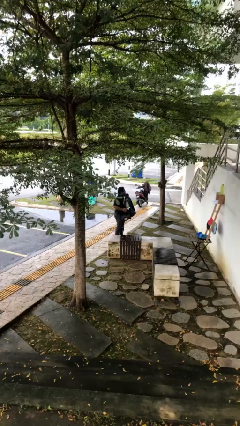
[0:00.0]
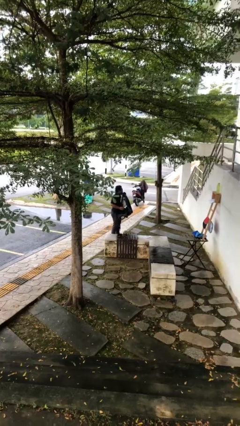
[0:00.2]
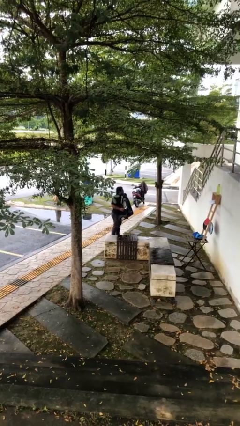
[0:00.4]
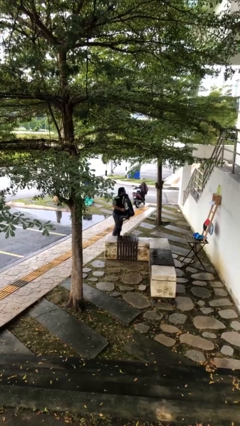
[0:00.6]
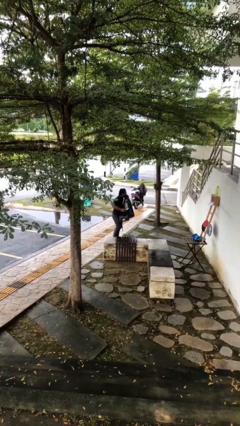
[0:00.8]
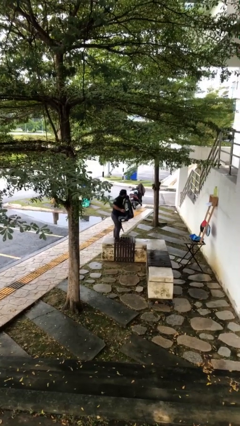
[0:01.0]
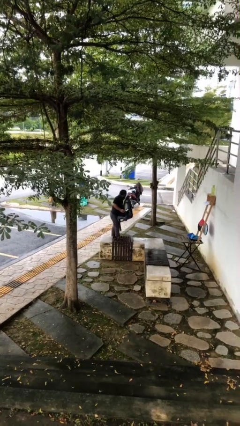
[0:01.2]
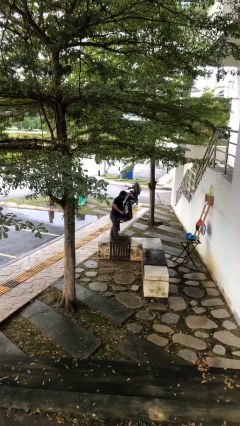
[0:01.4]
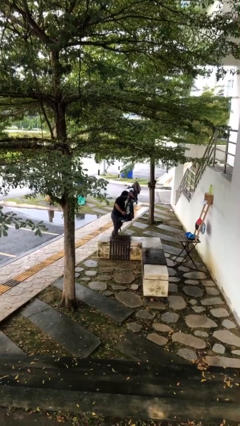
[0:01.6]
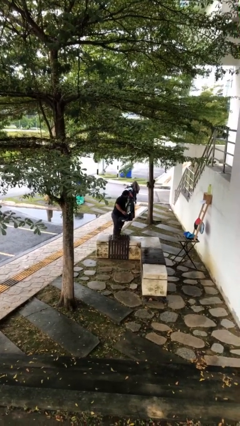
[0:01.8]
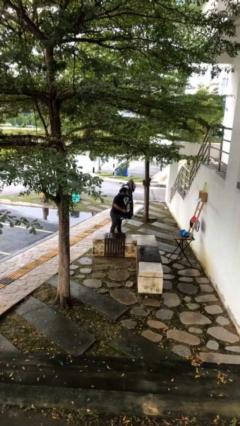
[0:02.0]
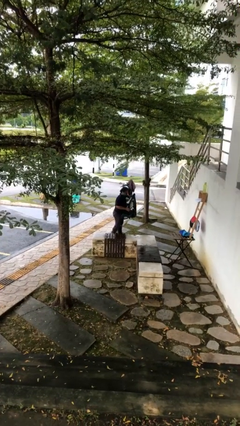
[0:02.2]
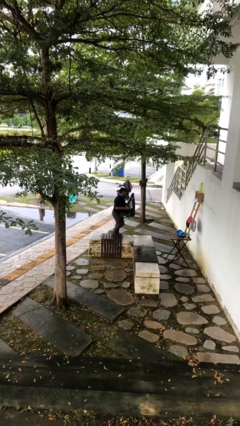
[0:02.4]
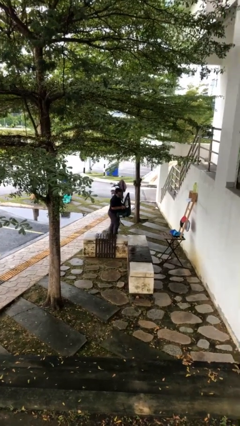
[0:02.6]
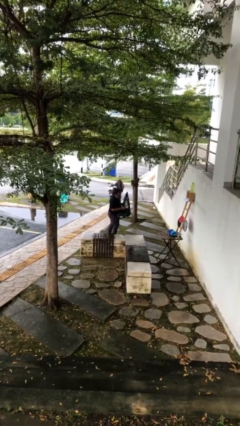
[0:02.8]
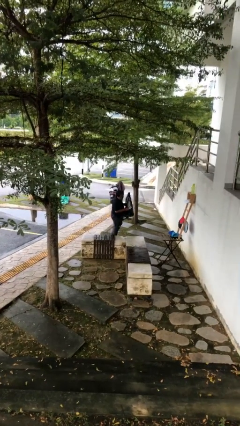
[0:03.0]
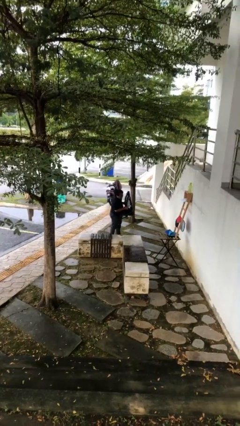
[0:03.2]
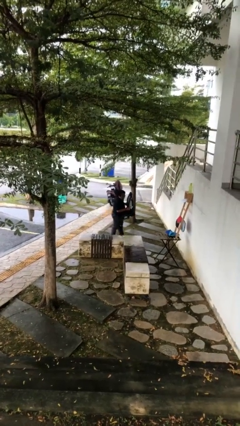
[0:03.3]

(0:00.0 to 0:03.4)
person carries heavy object

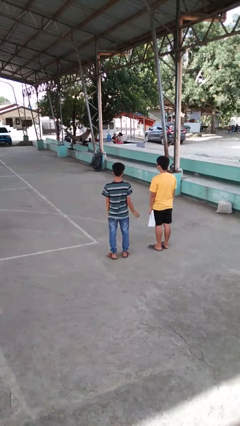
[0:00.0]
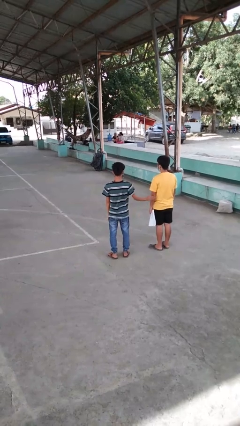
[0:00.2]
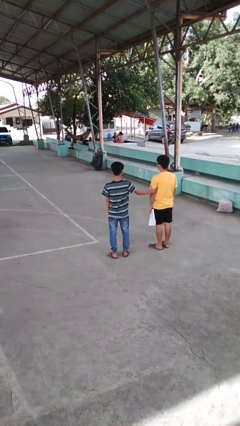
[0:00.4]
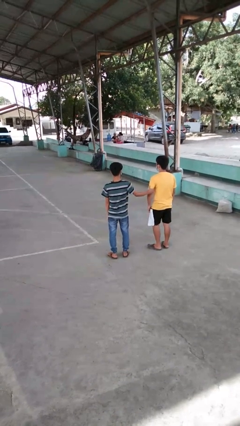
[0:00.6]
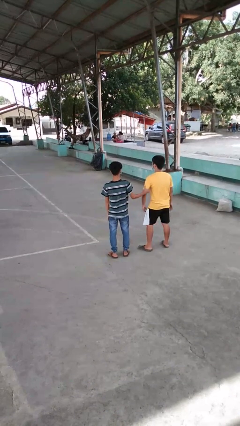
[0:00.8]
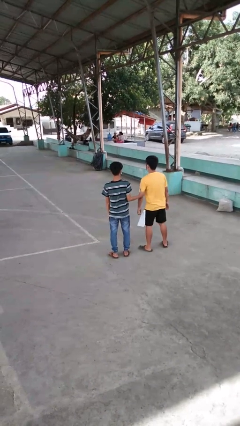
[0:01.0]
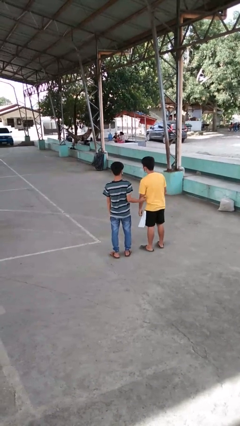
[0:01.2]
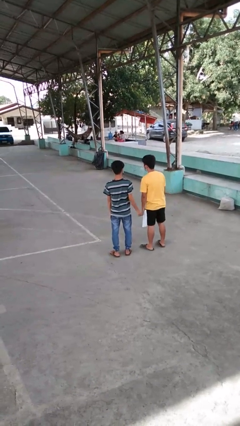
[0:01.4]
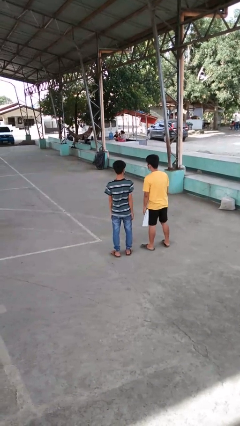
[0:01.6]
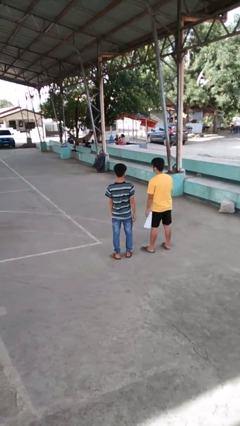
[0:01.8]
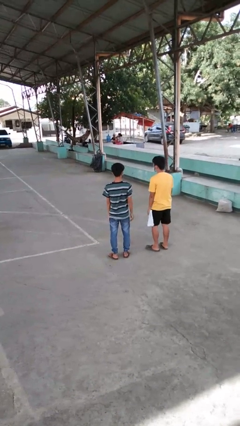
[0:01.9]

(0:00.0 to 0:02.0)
person grabs person by bicep

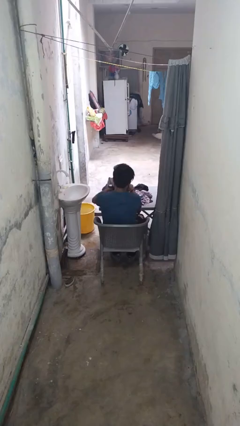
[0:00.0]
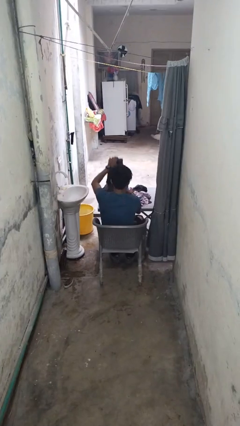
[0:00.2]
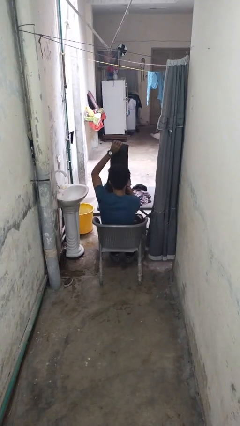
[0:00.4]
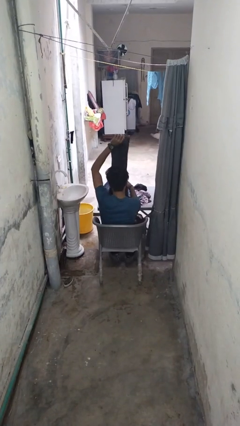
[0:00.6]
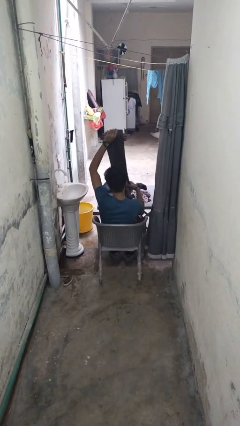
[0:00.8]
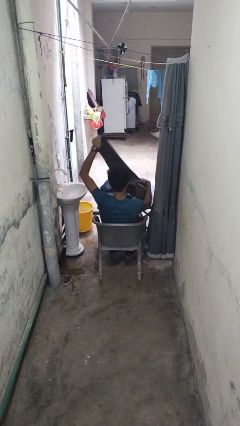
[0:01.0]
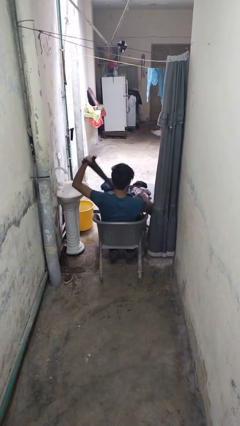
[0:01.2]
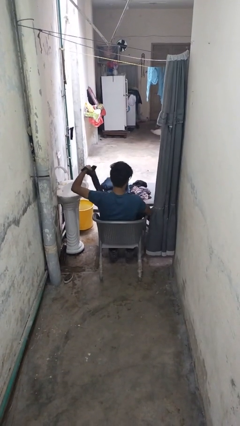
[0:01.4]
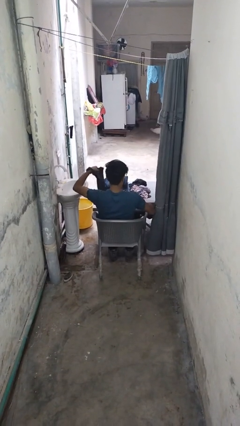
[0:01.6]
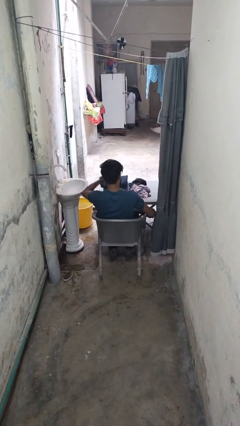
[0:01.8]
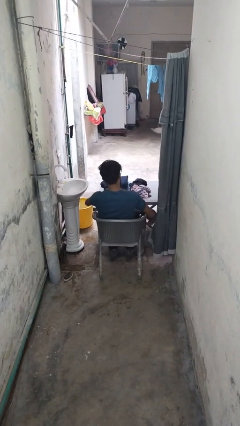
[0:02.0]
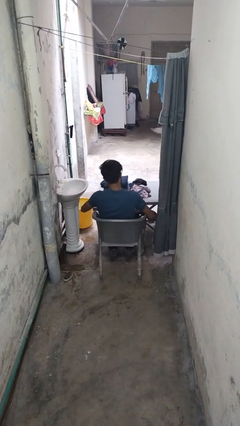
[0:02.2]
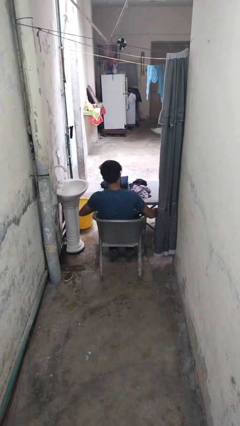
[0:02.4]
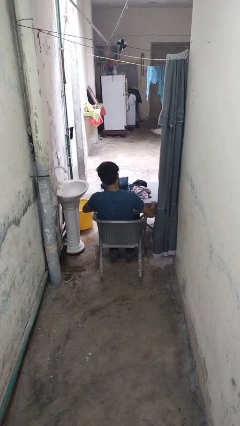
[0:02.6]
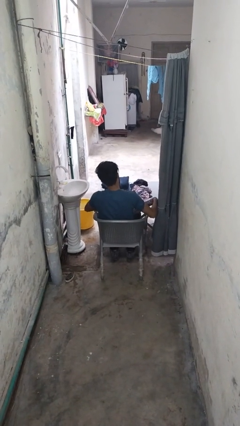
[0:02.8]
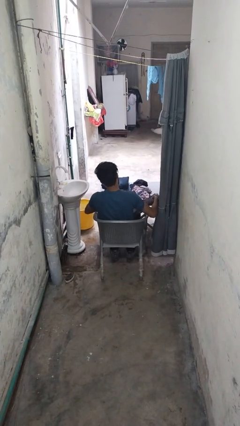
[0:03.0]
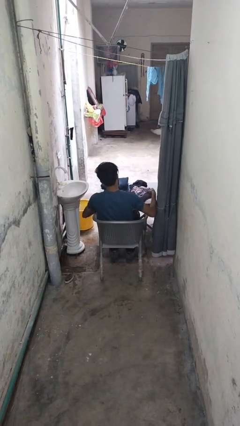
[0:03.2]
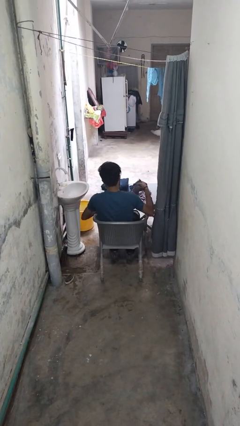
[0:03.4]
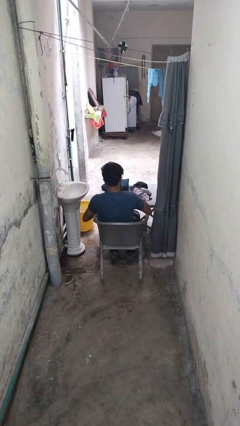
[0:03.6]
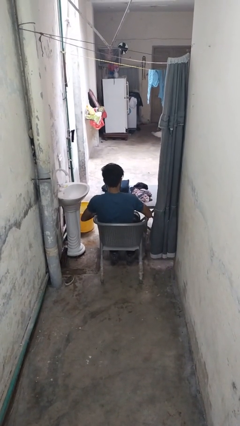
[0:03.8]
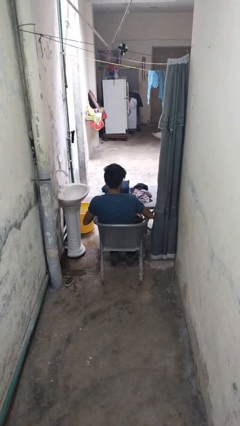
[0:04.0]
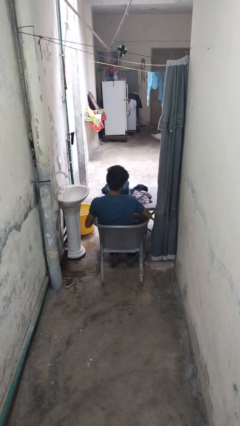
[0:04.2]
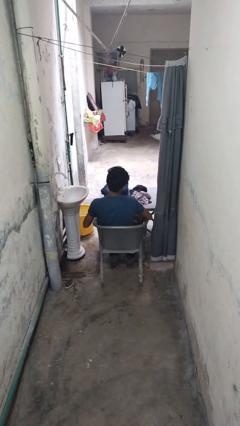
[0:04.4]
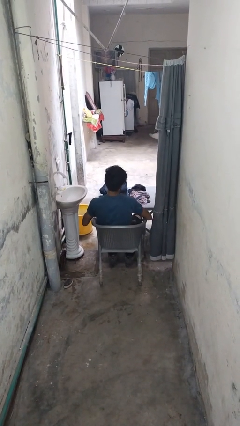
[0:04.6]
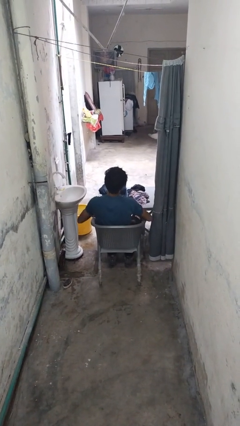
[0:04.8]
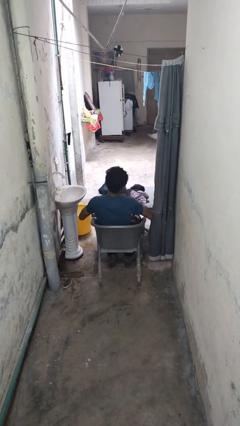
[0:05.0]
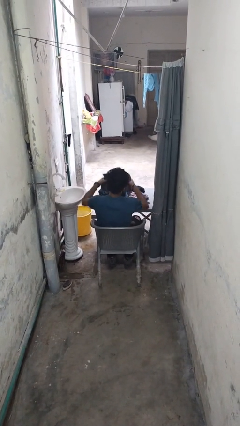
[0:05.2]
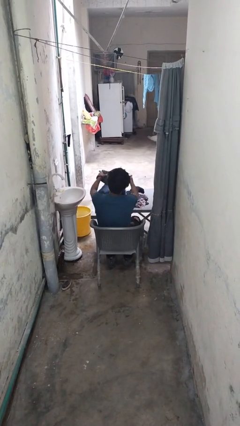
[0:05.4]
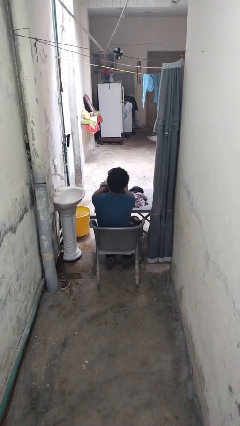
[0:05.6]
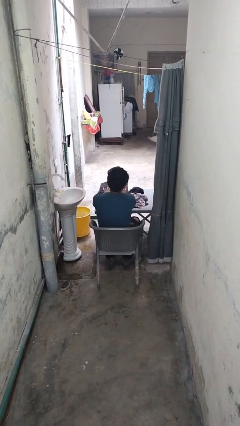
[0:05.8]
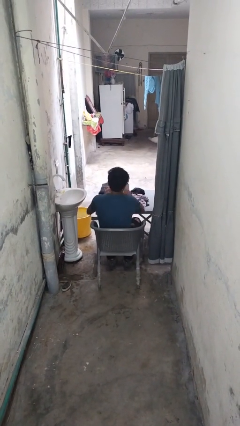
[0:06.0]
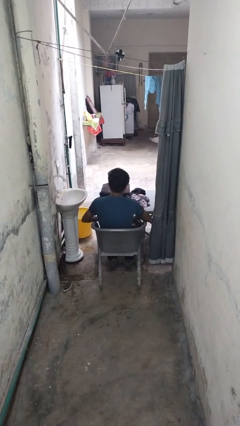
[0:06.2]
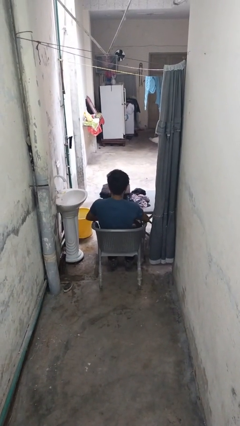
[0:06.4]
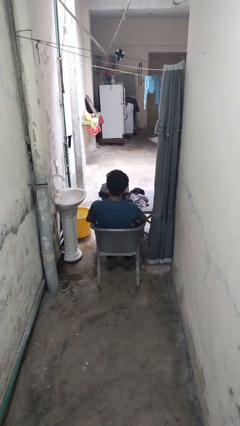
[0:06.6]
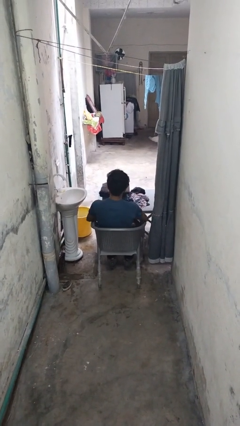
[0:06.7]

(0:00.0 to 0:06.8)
person folds pants

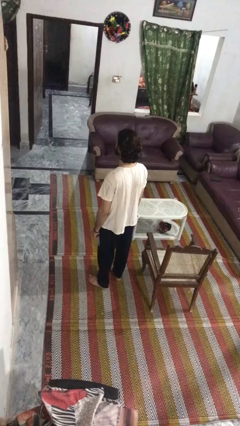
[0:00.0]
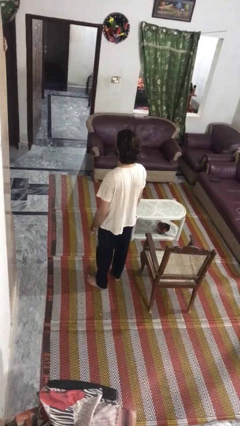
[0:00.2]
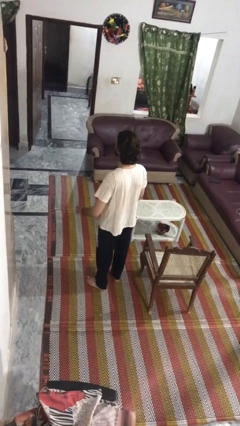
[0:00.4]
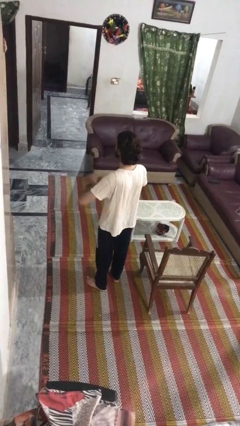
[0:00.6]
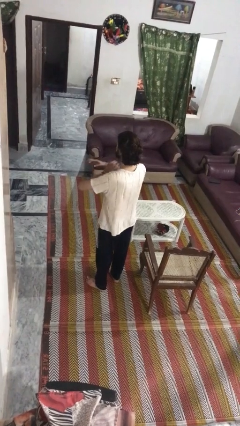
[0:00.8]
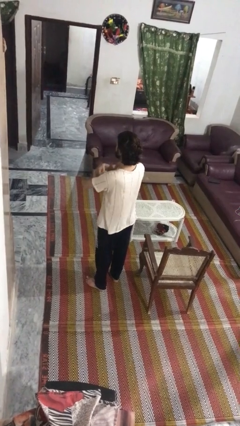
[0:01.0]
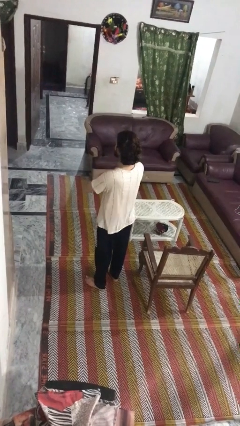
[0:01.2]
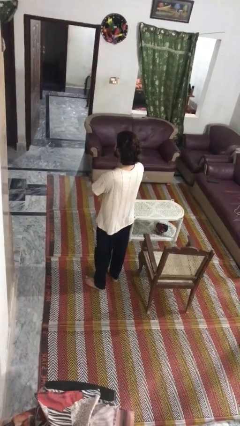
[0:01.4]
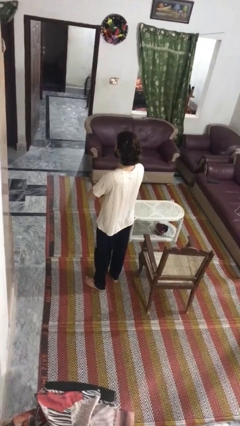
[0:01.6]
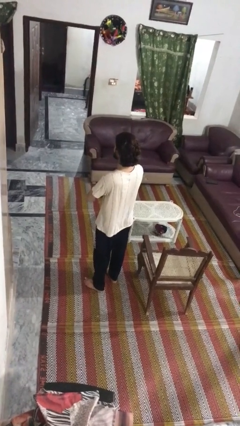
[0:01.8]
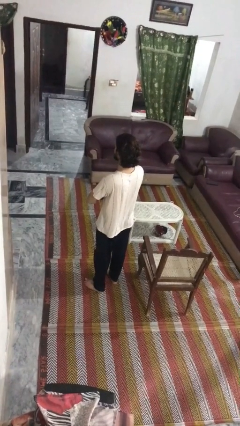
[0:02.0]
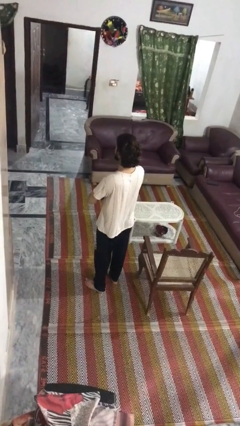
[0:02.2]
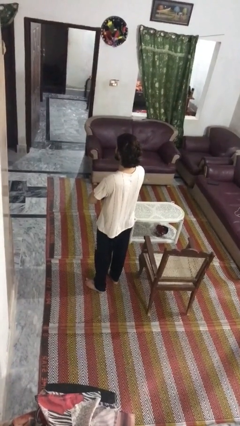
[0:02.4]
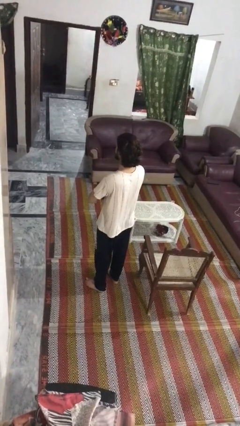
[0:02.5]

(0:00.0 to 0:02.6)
person crosses arms

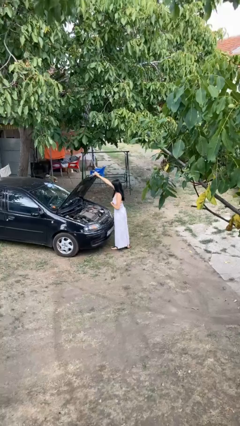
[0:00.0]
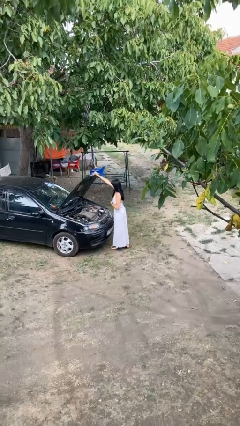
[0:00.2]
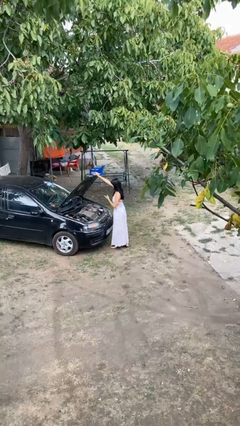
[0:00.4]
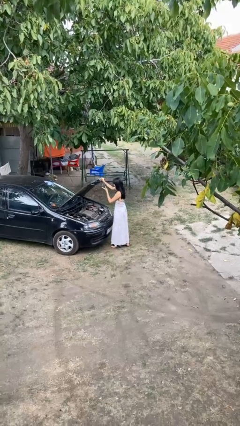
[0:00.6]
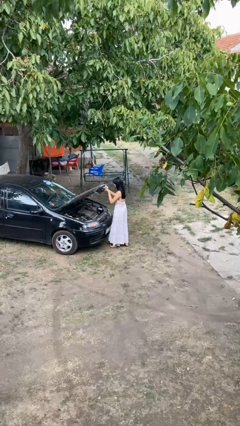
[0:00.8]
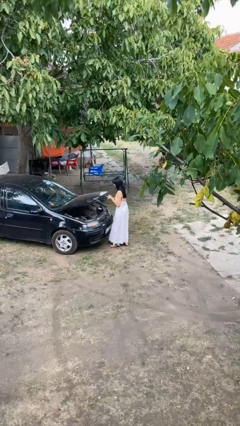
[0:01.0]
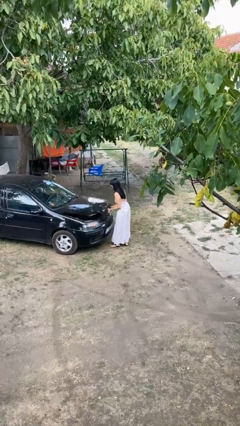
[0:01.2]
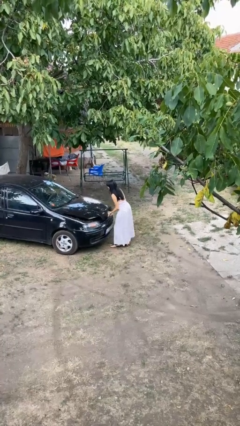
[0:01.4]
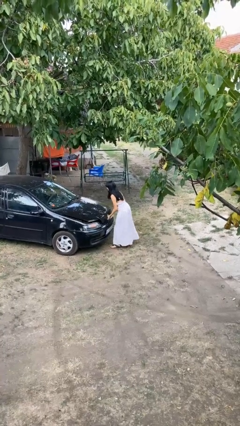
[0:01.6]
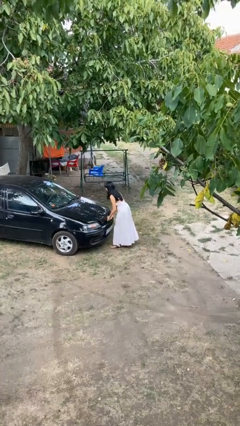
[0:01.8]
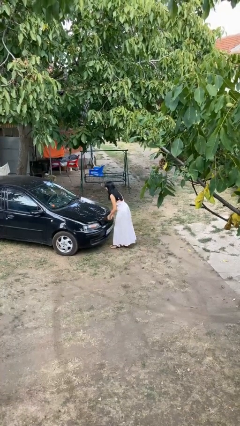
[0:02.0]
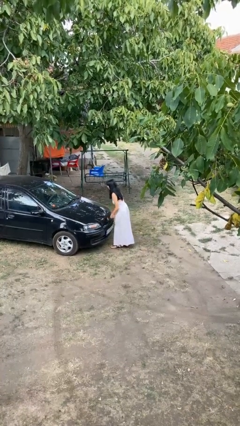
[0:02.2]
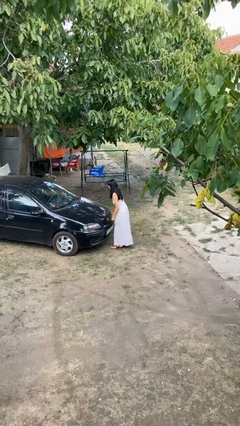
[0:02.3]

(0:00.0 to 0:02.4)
person closes car hood

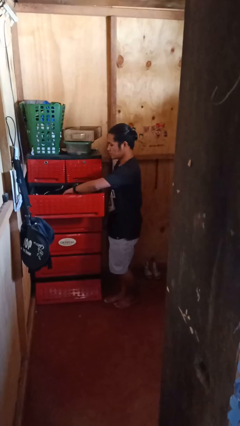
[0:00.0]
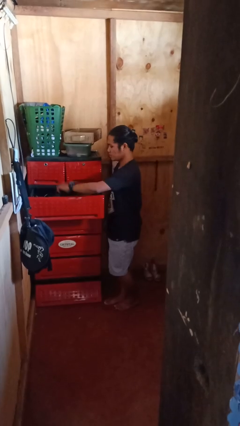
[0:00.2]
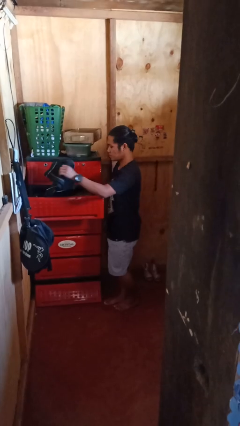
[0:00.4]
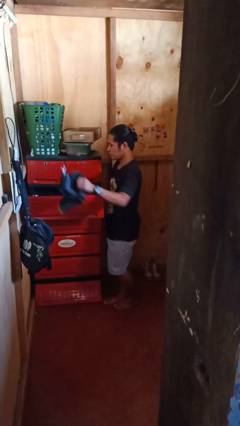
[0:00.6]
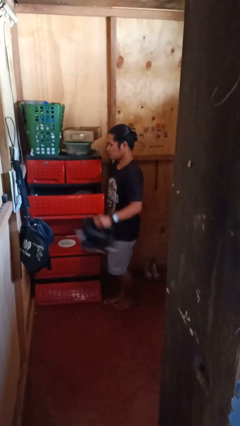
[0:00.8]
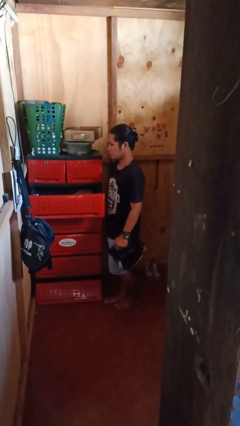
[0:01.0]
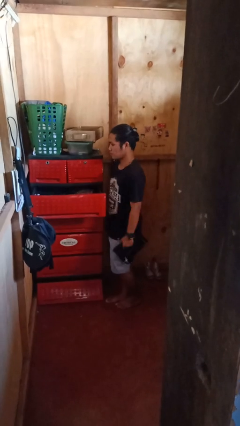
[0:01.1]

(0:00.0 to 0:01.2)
person takes clothes from dresser
